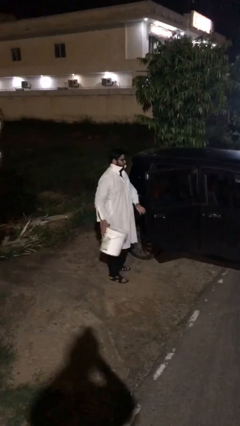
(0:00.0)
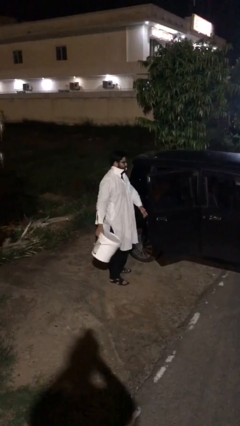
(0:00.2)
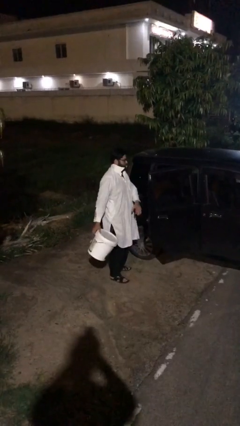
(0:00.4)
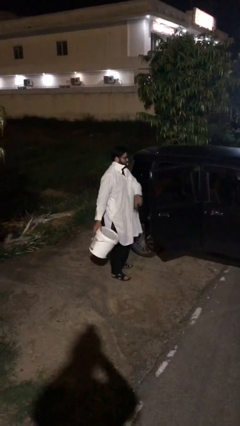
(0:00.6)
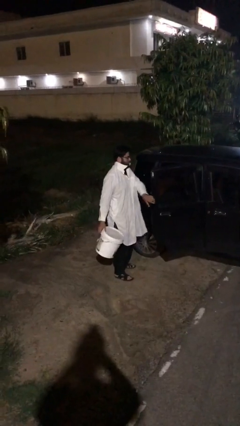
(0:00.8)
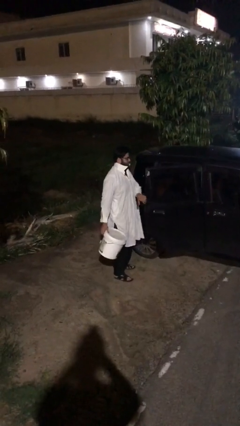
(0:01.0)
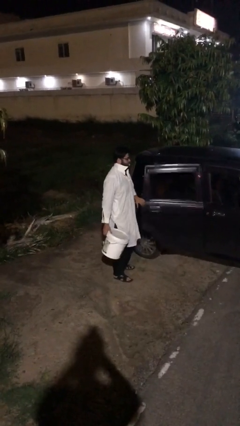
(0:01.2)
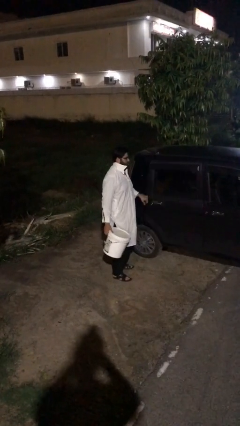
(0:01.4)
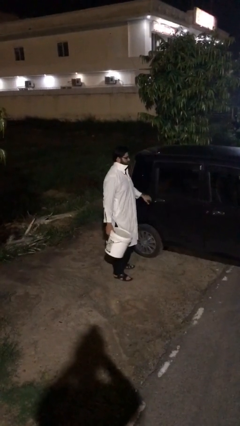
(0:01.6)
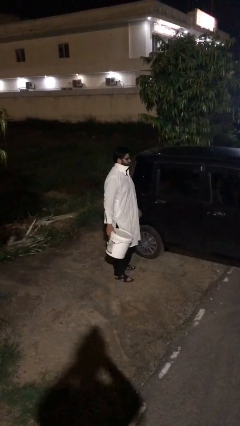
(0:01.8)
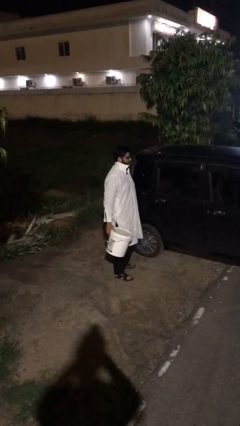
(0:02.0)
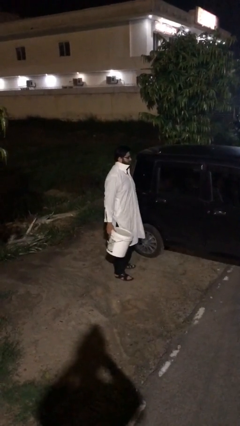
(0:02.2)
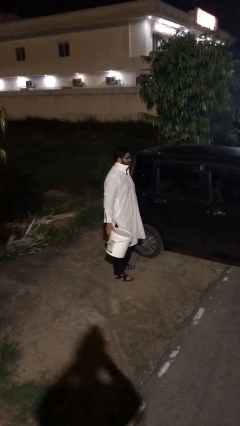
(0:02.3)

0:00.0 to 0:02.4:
person closes car door

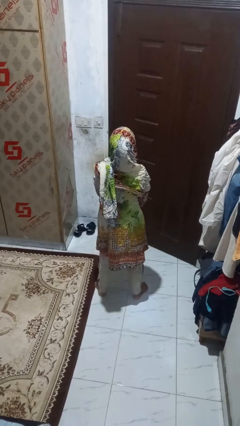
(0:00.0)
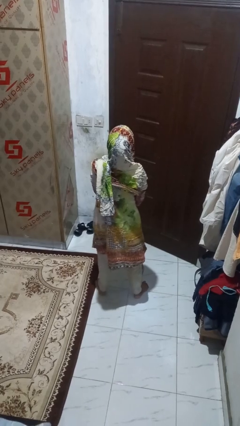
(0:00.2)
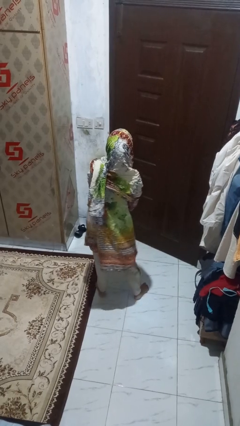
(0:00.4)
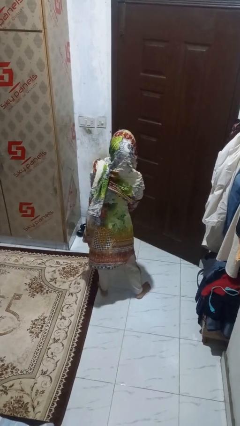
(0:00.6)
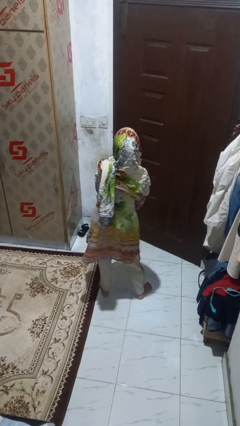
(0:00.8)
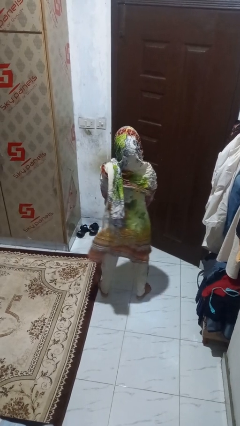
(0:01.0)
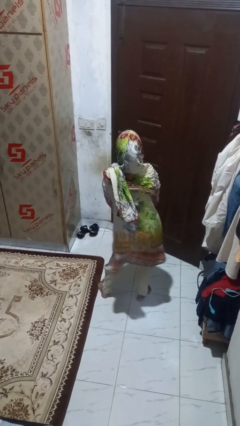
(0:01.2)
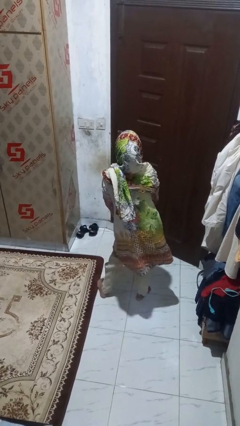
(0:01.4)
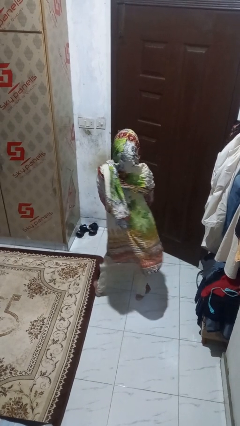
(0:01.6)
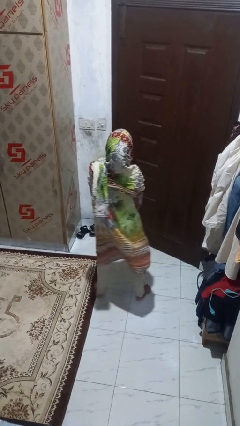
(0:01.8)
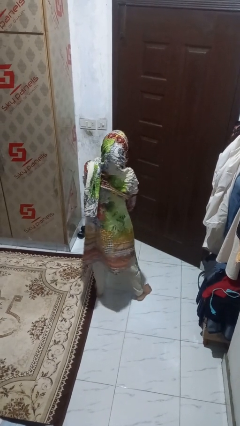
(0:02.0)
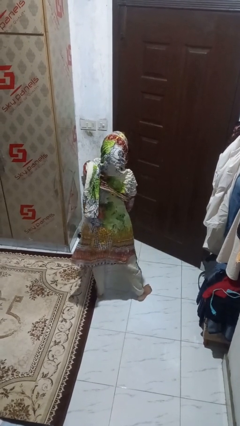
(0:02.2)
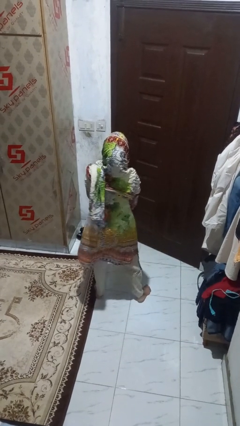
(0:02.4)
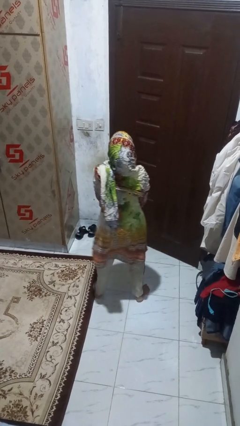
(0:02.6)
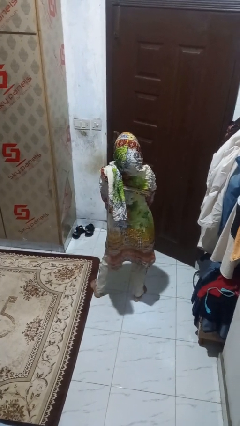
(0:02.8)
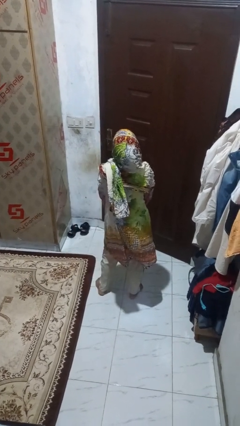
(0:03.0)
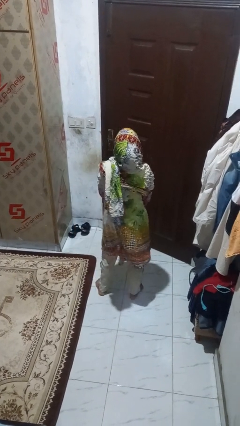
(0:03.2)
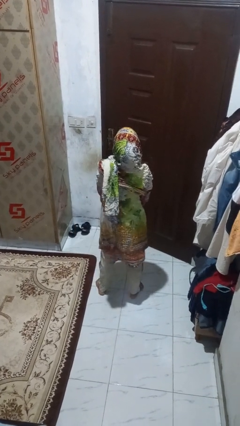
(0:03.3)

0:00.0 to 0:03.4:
person wiggles hips

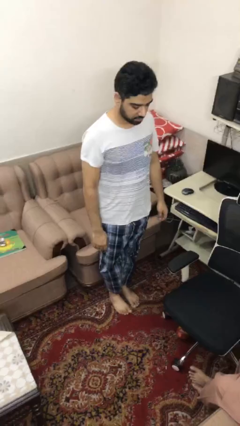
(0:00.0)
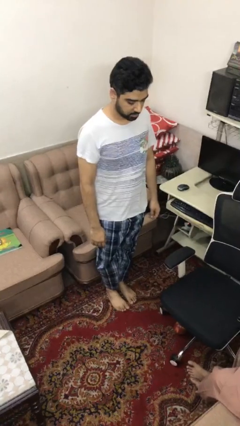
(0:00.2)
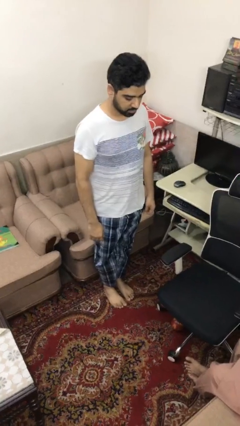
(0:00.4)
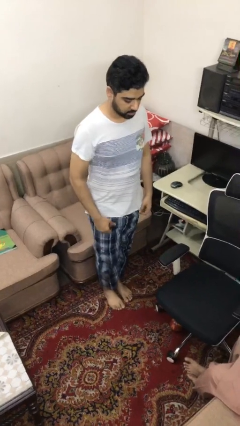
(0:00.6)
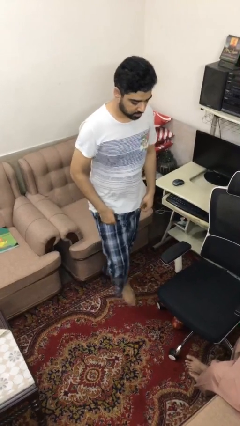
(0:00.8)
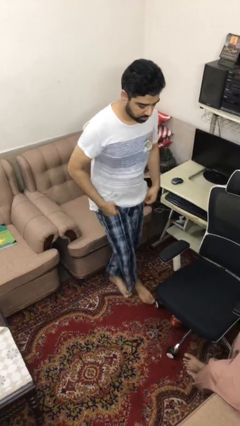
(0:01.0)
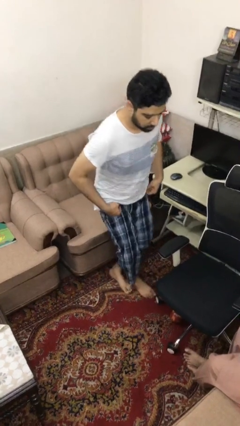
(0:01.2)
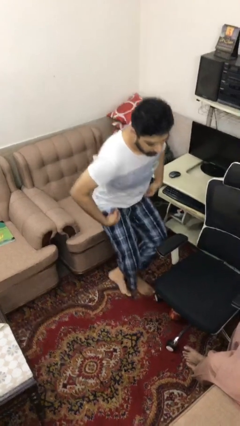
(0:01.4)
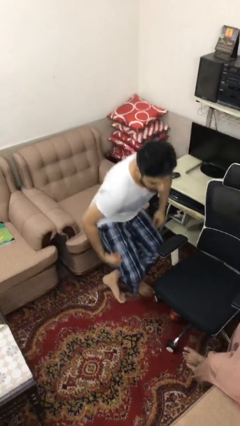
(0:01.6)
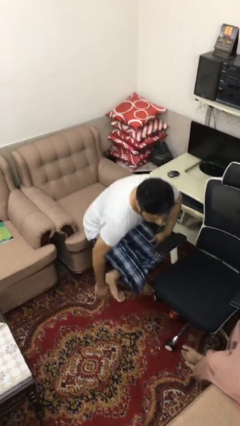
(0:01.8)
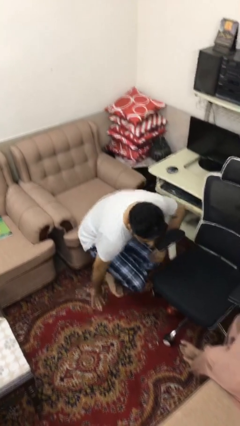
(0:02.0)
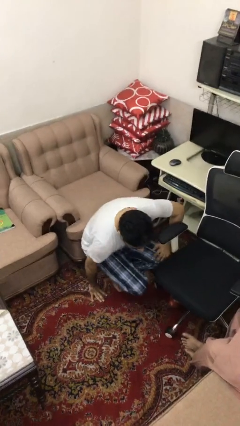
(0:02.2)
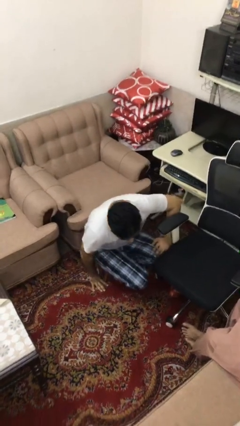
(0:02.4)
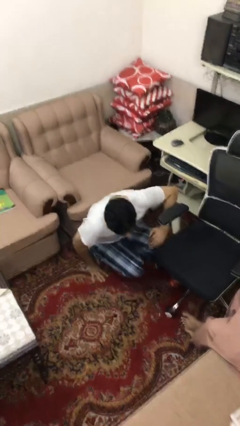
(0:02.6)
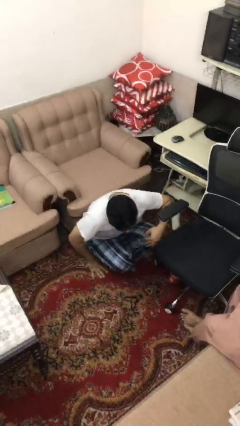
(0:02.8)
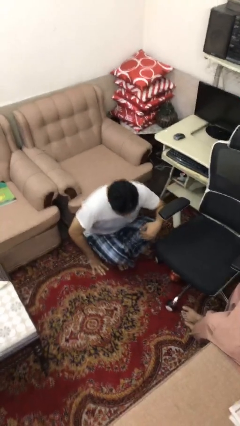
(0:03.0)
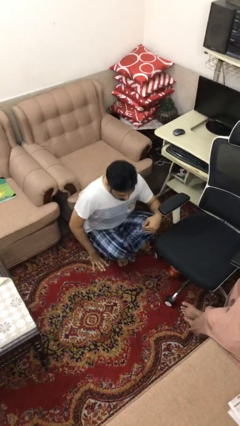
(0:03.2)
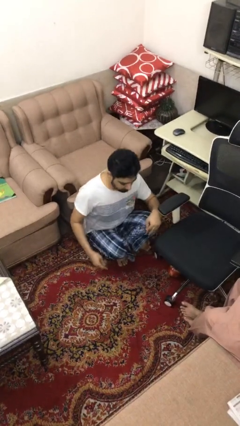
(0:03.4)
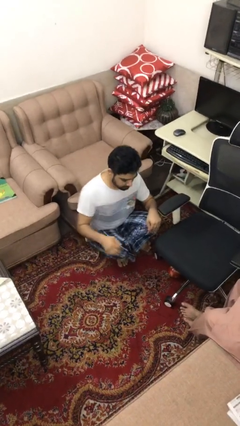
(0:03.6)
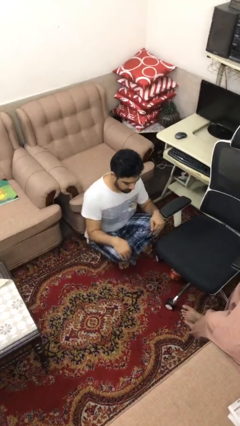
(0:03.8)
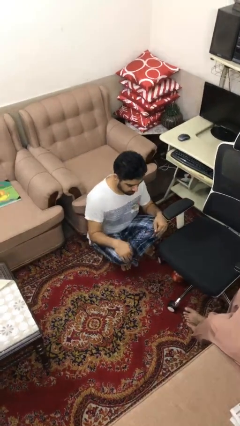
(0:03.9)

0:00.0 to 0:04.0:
person sits crisscross

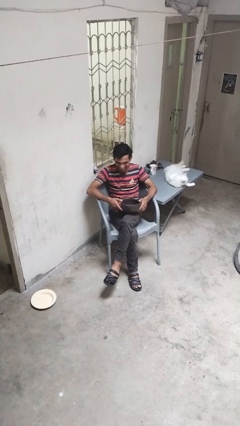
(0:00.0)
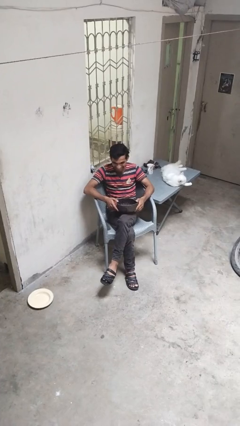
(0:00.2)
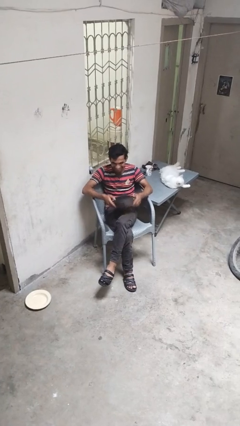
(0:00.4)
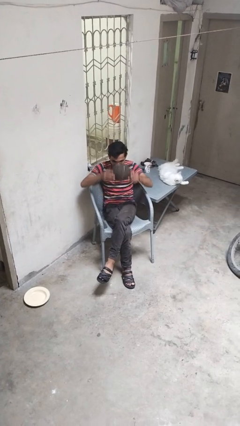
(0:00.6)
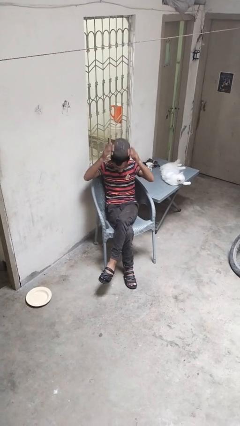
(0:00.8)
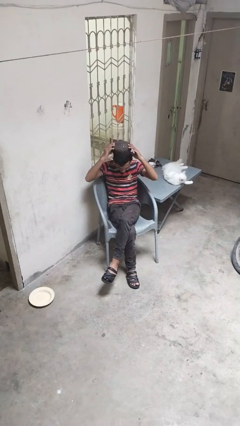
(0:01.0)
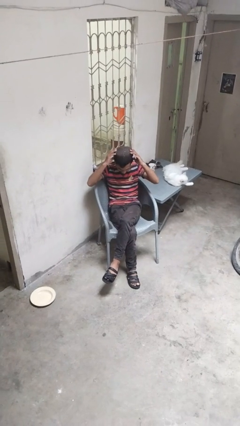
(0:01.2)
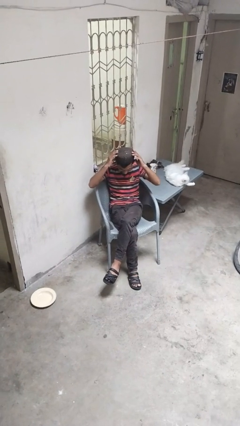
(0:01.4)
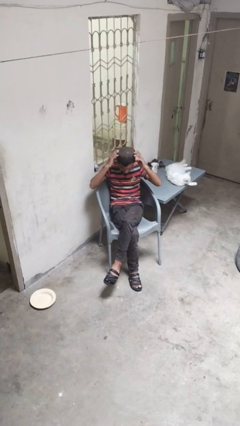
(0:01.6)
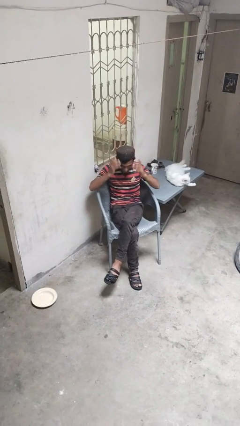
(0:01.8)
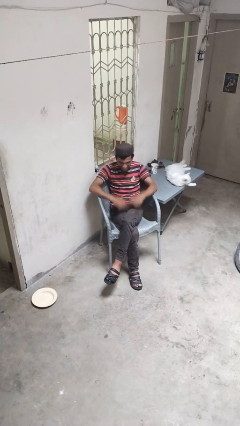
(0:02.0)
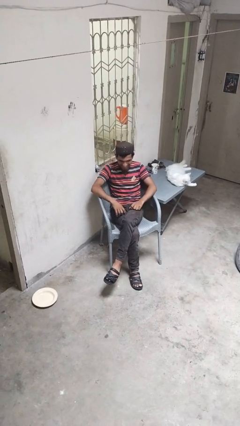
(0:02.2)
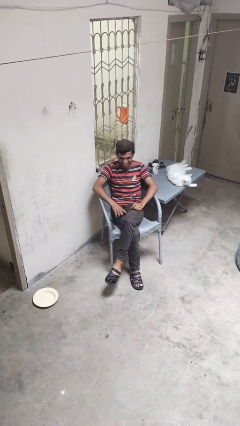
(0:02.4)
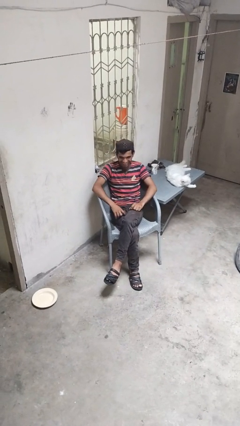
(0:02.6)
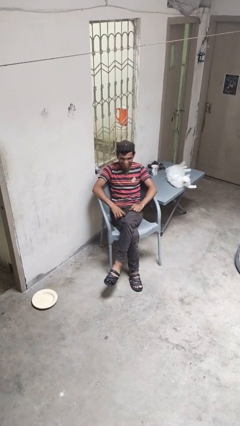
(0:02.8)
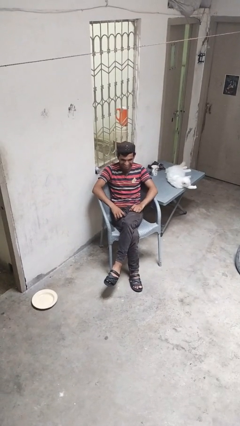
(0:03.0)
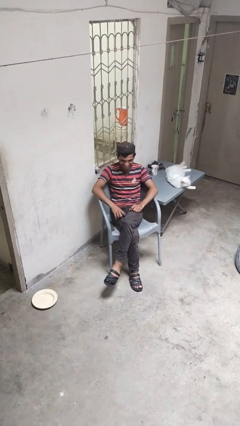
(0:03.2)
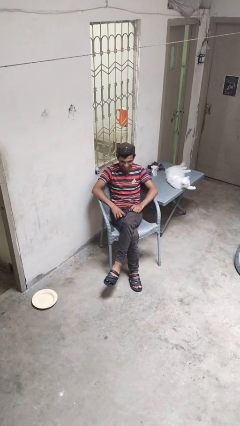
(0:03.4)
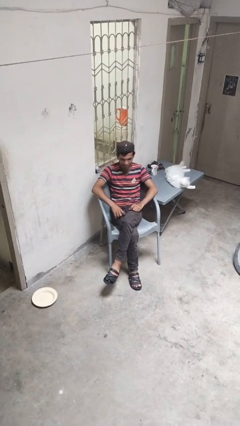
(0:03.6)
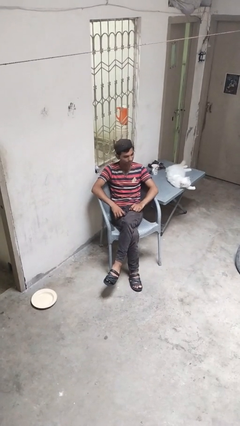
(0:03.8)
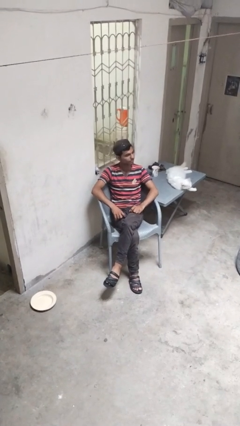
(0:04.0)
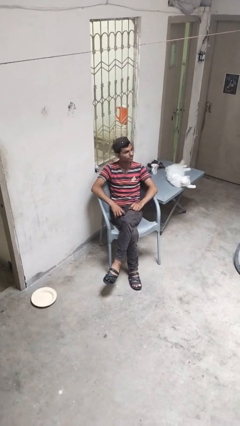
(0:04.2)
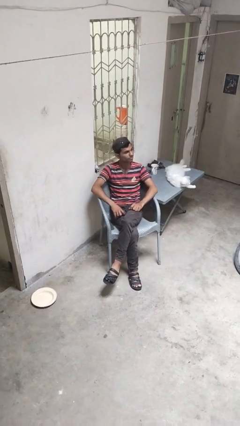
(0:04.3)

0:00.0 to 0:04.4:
person puts on hat

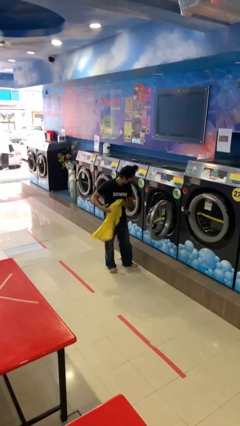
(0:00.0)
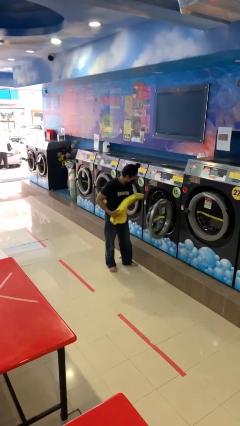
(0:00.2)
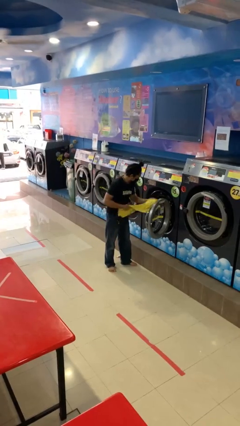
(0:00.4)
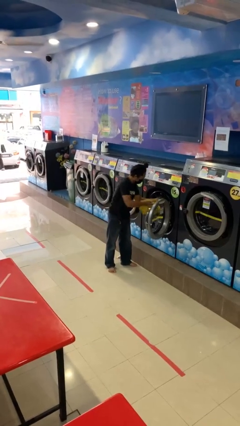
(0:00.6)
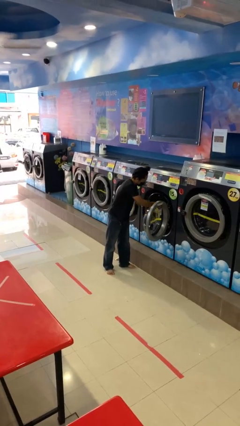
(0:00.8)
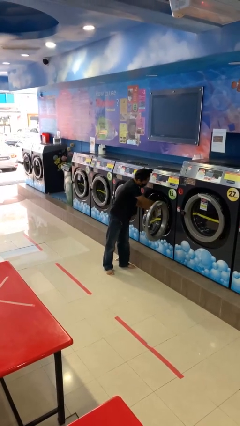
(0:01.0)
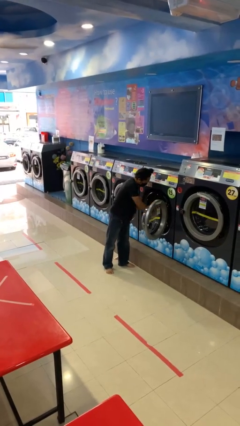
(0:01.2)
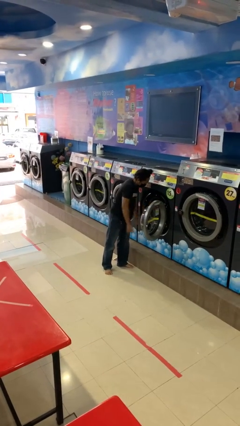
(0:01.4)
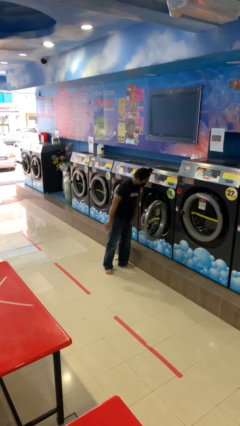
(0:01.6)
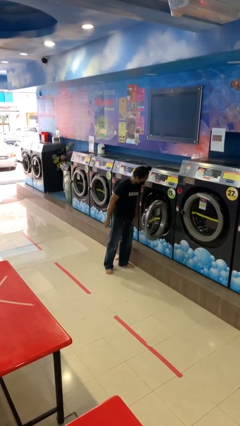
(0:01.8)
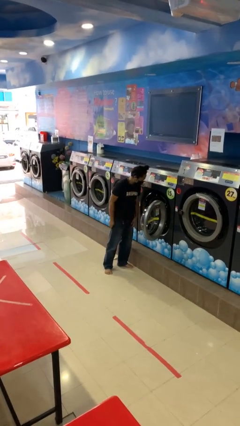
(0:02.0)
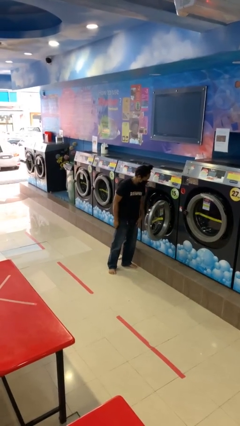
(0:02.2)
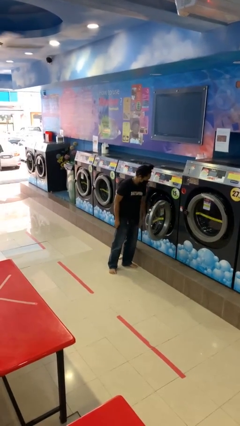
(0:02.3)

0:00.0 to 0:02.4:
person loads clotheswasher

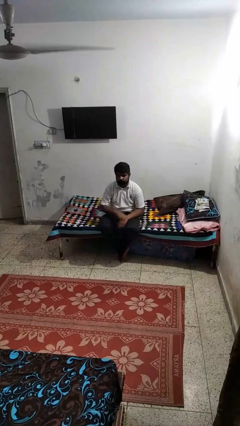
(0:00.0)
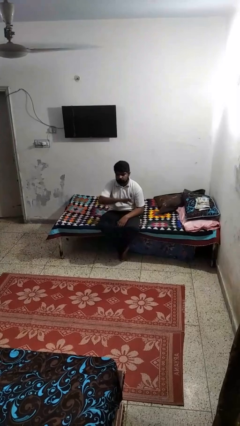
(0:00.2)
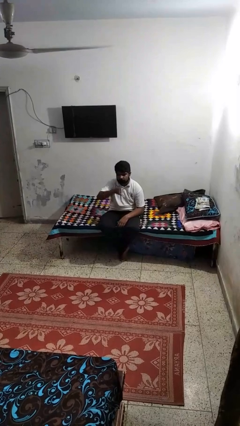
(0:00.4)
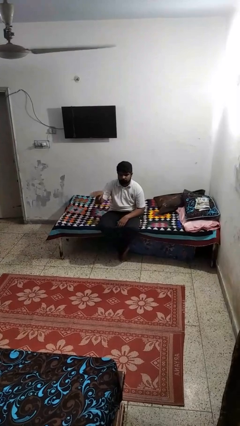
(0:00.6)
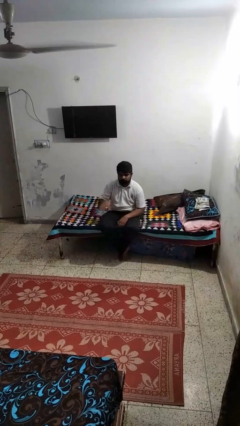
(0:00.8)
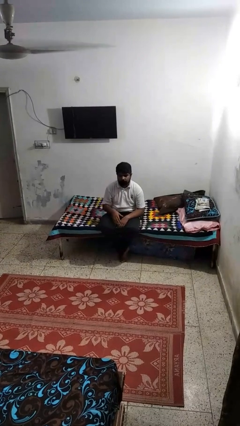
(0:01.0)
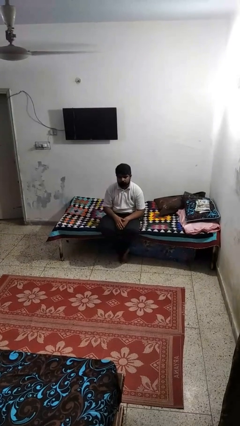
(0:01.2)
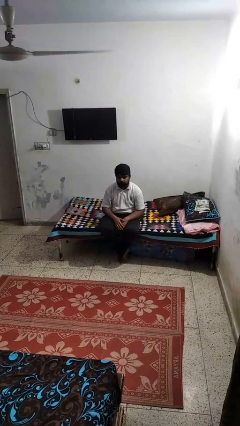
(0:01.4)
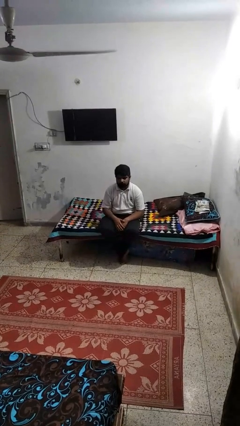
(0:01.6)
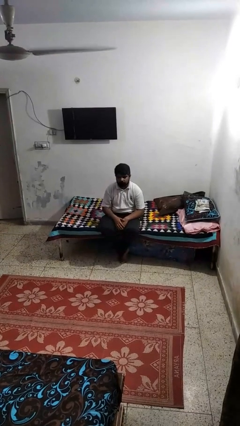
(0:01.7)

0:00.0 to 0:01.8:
person gestures swipe right
